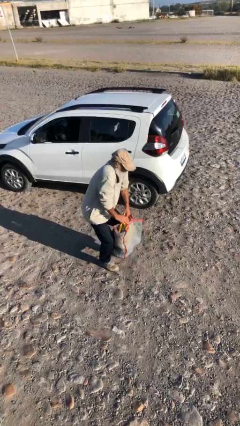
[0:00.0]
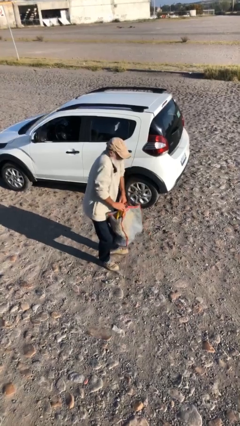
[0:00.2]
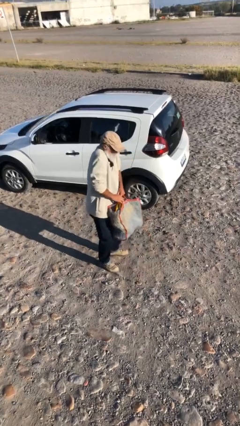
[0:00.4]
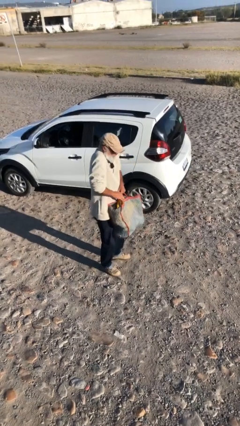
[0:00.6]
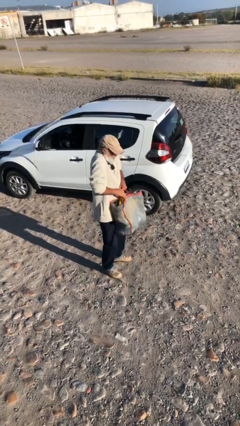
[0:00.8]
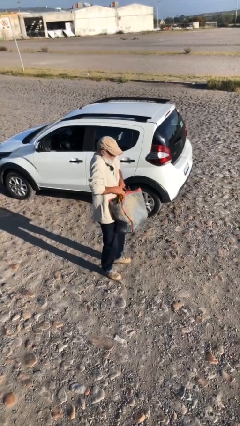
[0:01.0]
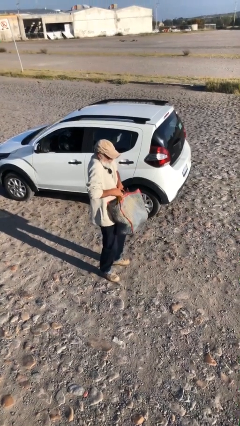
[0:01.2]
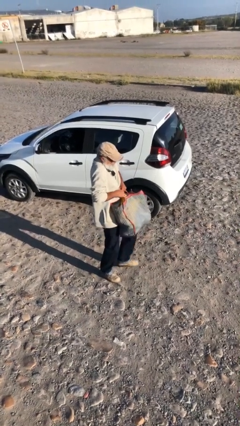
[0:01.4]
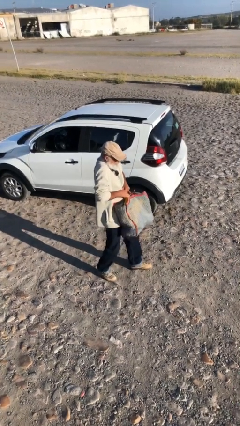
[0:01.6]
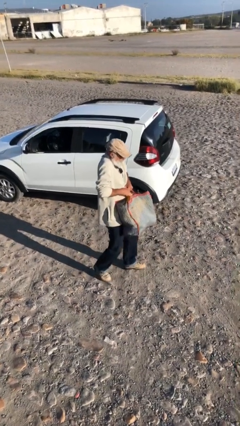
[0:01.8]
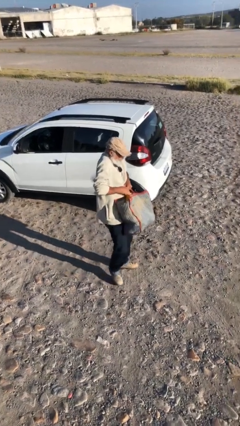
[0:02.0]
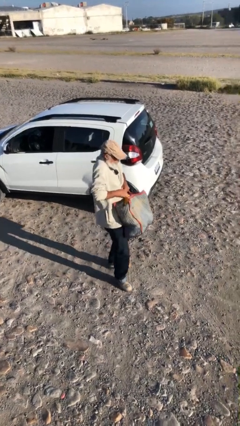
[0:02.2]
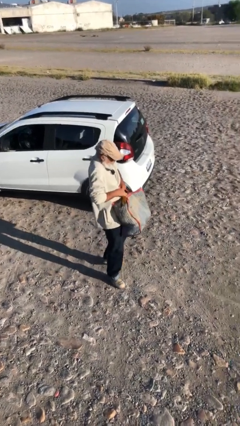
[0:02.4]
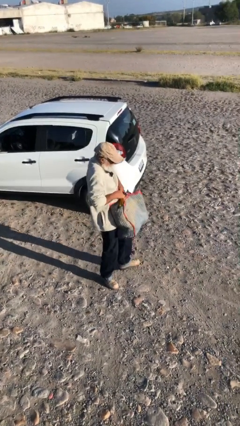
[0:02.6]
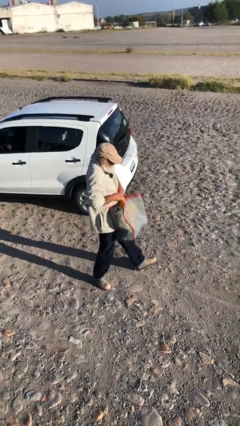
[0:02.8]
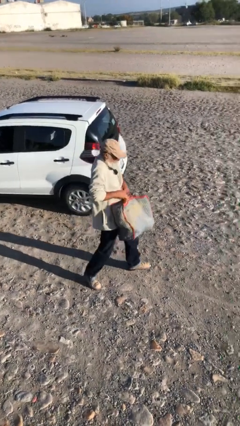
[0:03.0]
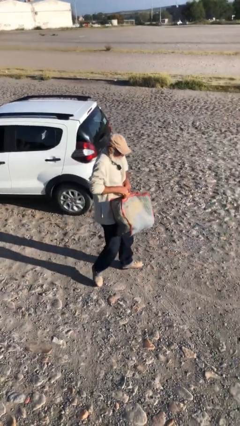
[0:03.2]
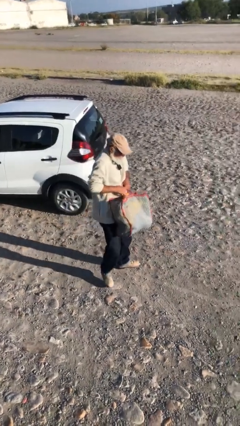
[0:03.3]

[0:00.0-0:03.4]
person carries heavy object

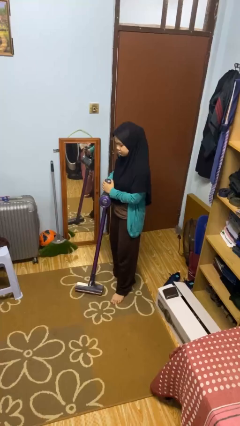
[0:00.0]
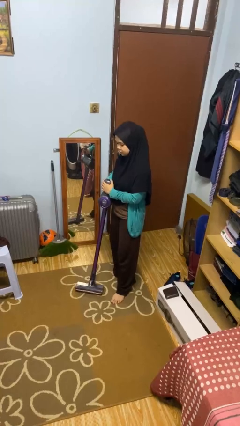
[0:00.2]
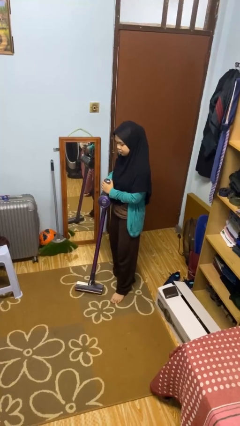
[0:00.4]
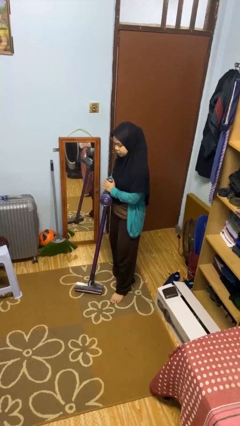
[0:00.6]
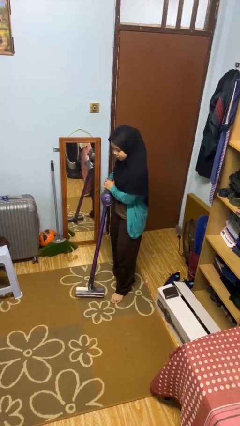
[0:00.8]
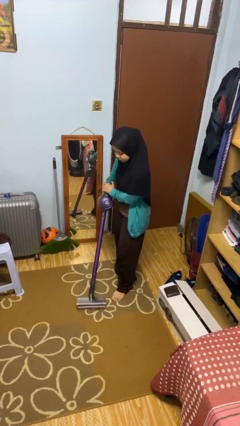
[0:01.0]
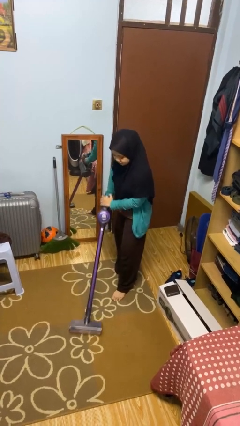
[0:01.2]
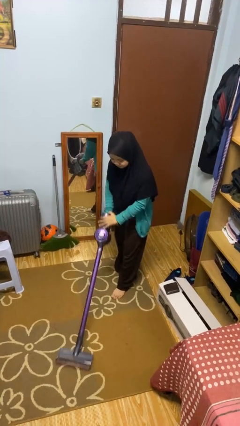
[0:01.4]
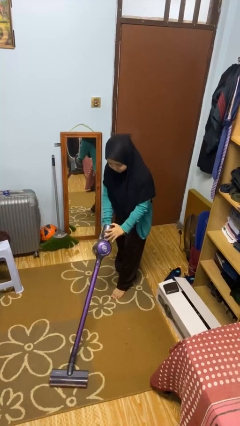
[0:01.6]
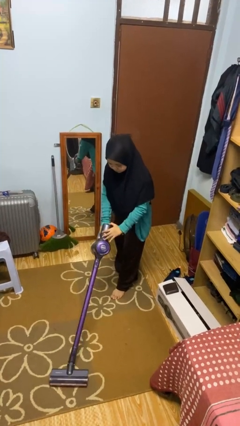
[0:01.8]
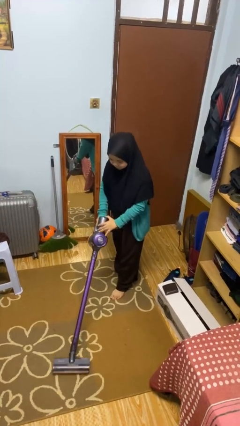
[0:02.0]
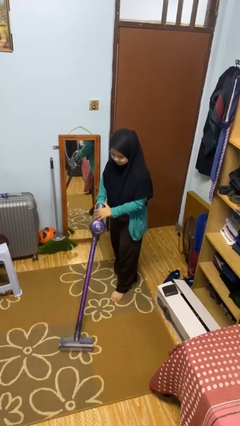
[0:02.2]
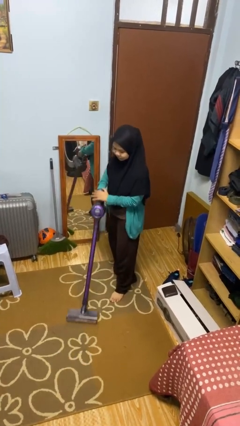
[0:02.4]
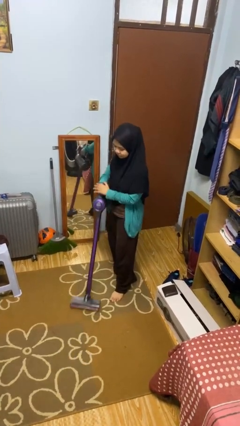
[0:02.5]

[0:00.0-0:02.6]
person vacuums carpet

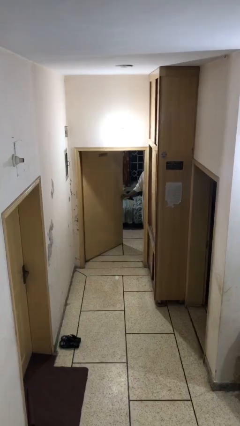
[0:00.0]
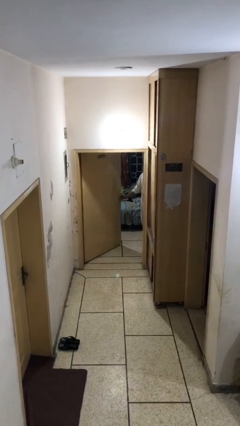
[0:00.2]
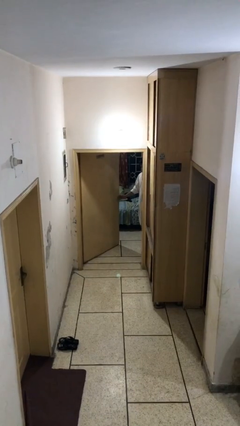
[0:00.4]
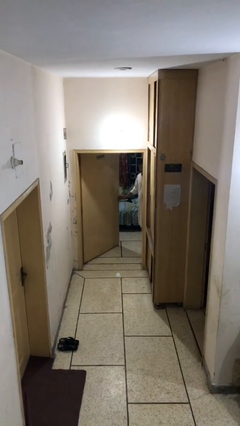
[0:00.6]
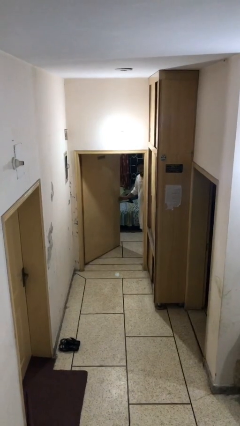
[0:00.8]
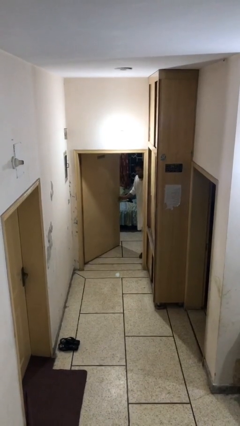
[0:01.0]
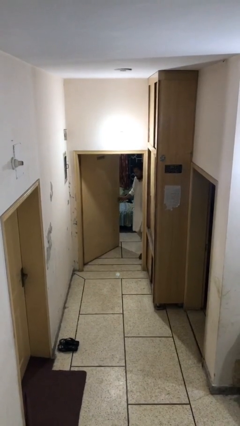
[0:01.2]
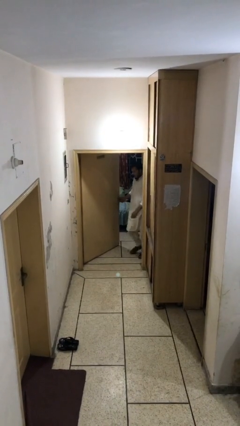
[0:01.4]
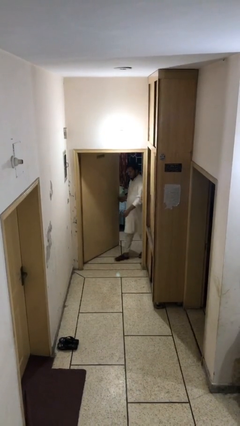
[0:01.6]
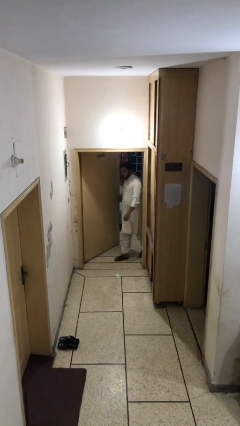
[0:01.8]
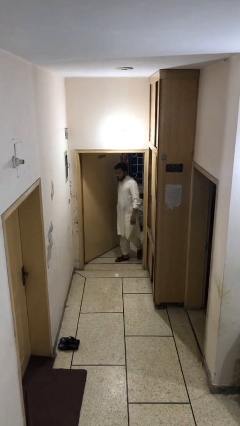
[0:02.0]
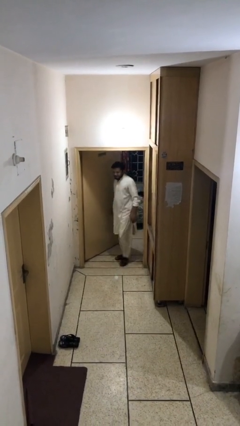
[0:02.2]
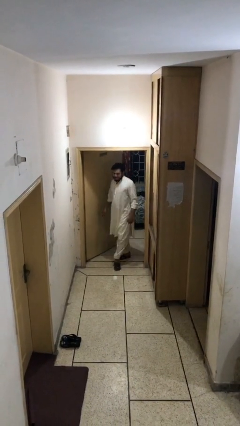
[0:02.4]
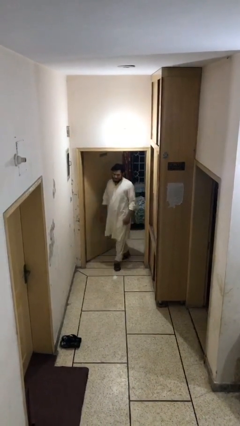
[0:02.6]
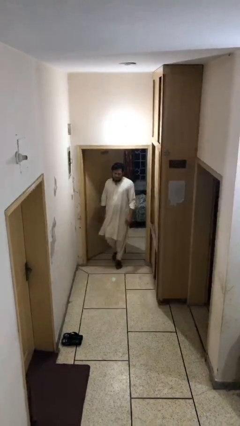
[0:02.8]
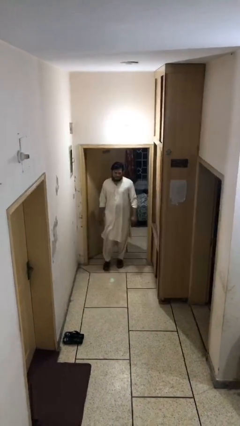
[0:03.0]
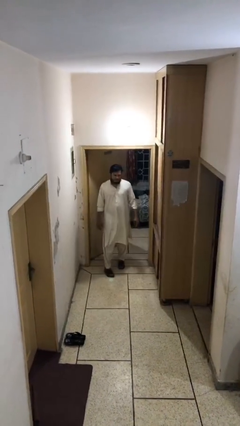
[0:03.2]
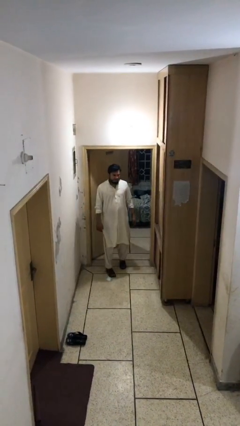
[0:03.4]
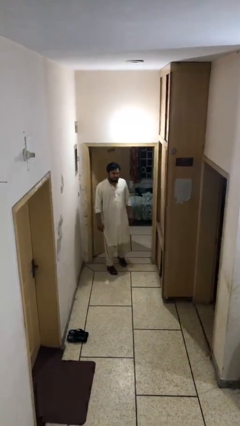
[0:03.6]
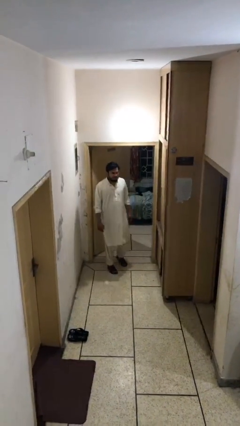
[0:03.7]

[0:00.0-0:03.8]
person enters scene through structure

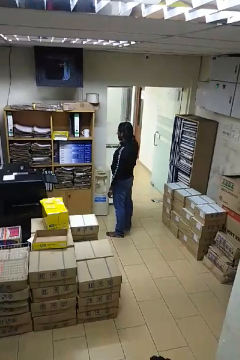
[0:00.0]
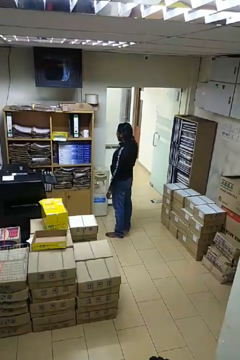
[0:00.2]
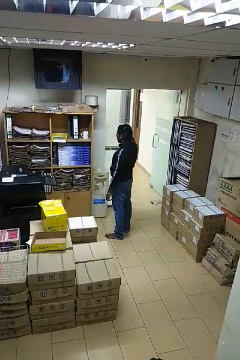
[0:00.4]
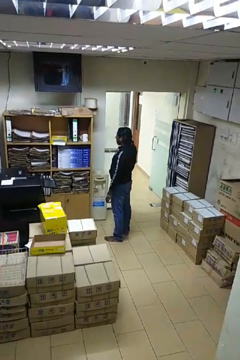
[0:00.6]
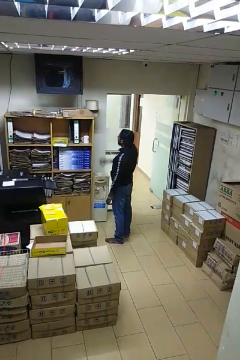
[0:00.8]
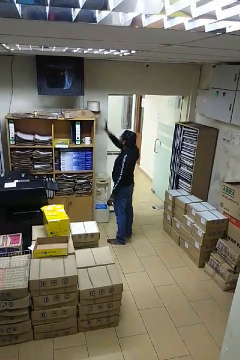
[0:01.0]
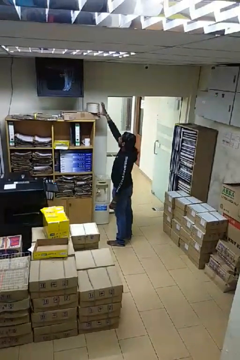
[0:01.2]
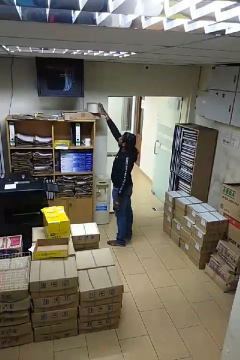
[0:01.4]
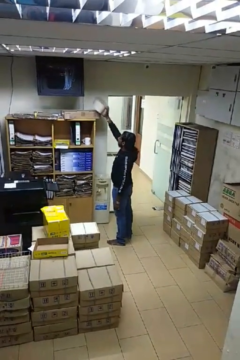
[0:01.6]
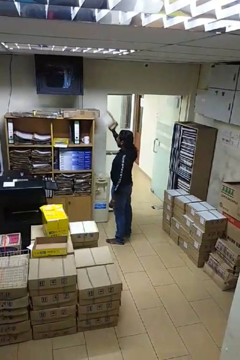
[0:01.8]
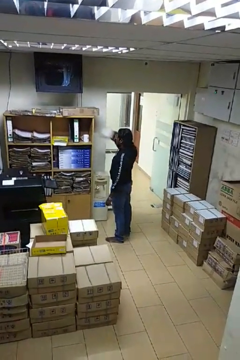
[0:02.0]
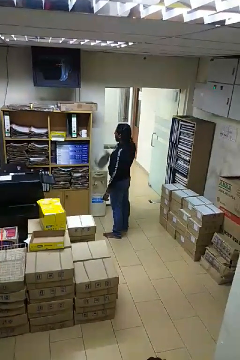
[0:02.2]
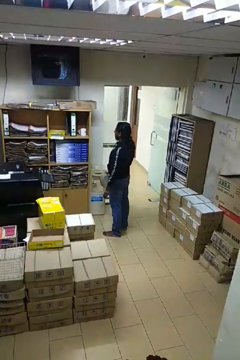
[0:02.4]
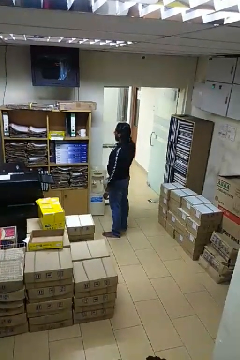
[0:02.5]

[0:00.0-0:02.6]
person picks up object from shelf

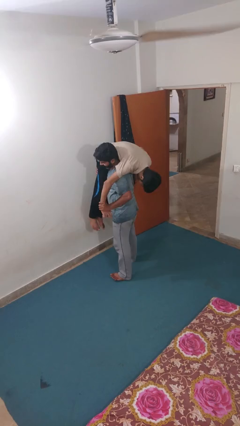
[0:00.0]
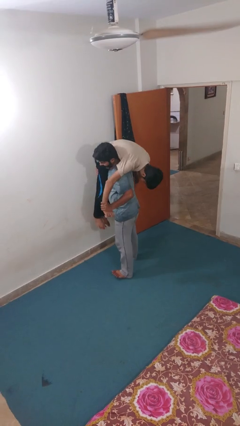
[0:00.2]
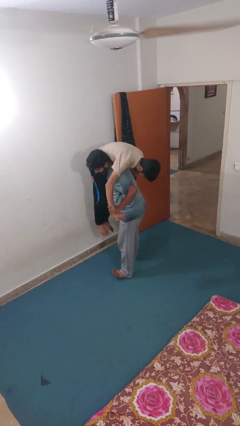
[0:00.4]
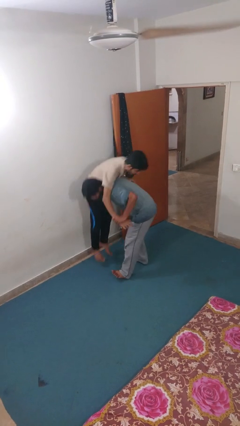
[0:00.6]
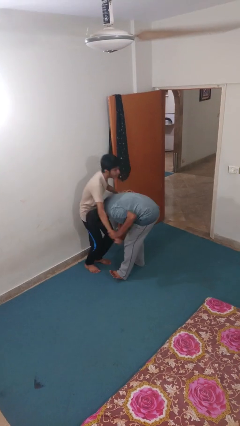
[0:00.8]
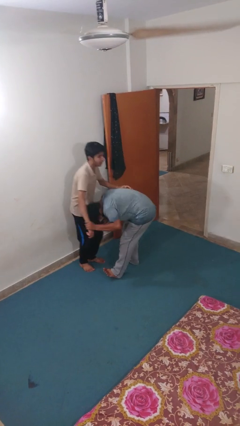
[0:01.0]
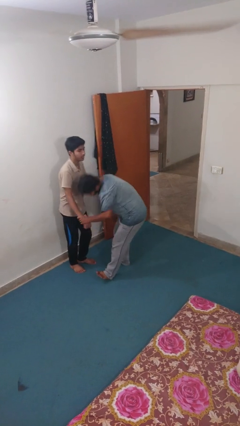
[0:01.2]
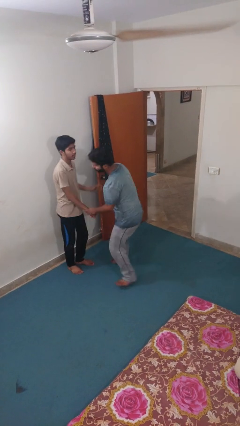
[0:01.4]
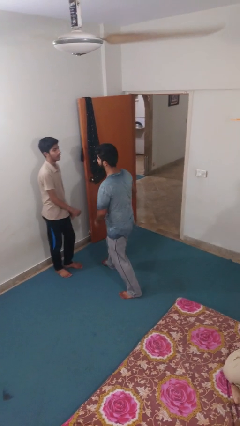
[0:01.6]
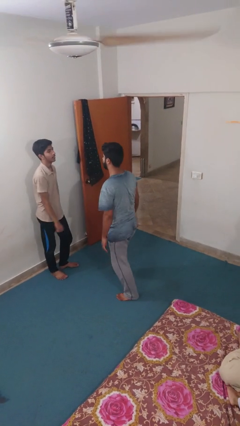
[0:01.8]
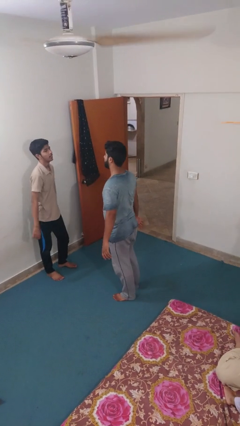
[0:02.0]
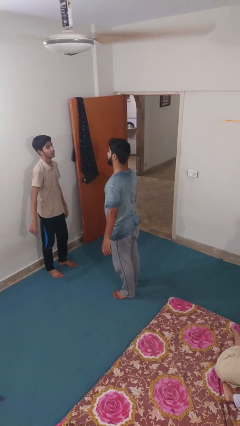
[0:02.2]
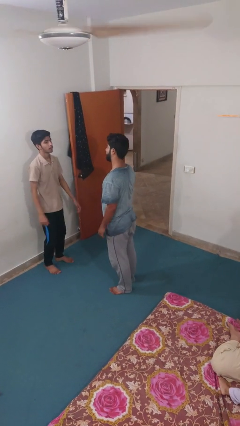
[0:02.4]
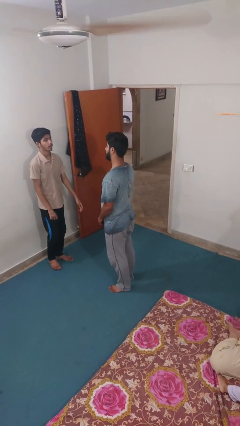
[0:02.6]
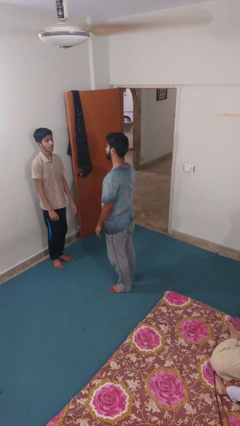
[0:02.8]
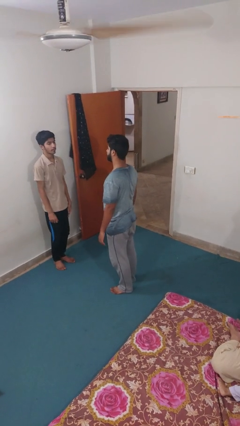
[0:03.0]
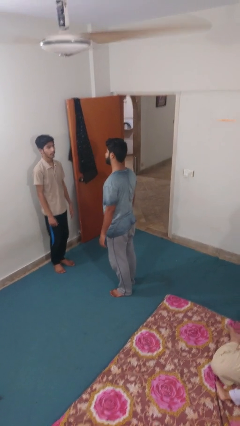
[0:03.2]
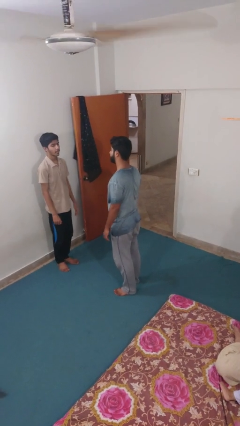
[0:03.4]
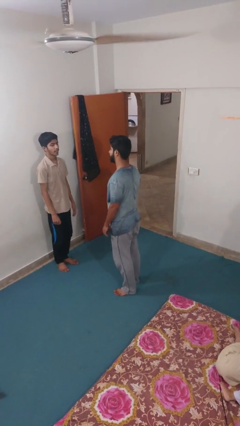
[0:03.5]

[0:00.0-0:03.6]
person puts down person

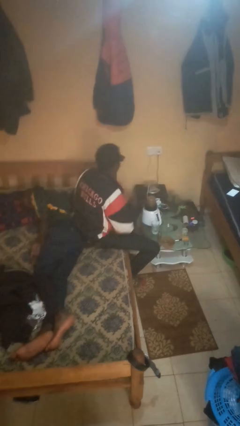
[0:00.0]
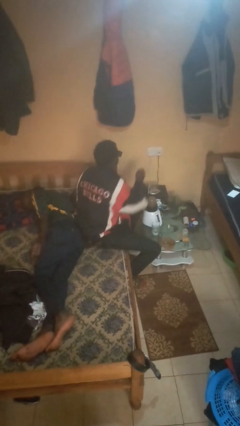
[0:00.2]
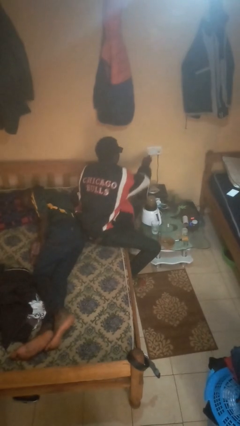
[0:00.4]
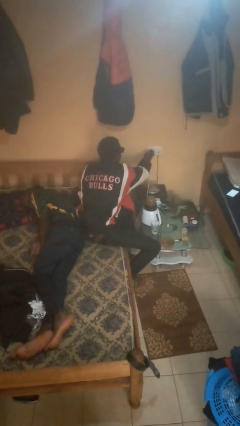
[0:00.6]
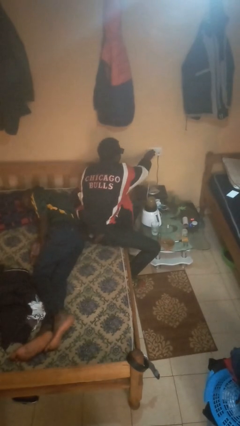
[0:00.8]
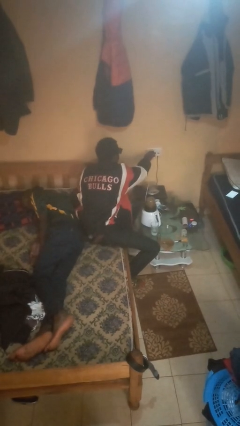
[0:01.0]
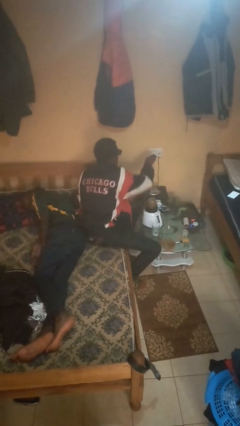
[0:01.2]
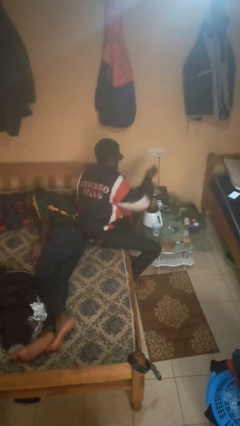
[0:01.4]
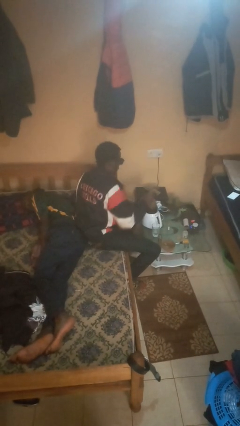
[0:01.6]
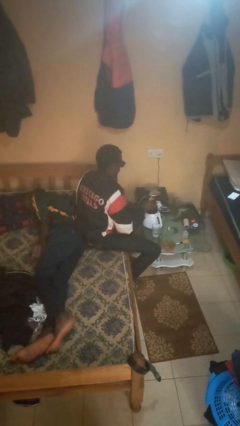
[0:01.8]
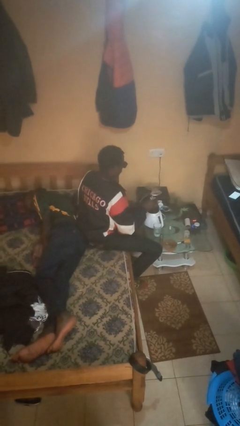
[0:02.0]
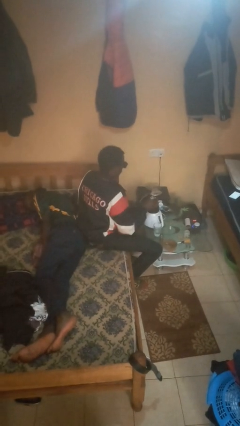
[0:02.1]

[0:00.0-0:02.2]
person unplugs from electrical socket
